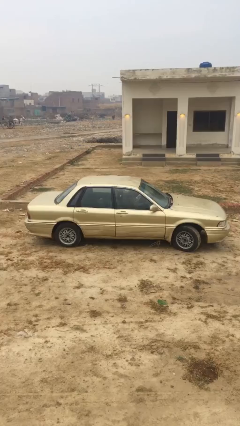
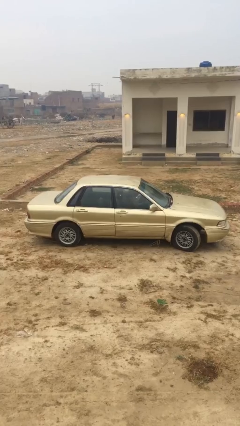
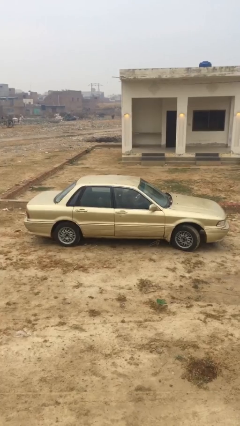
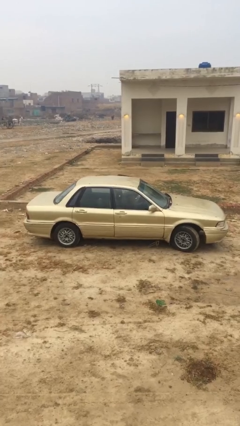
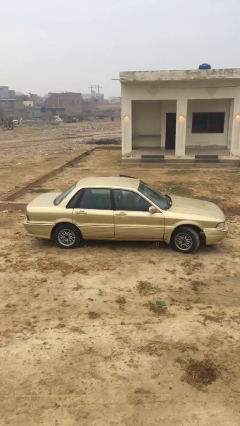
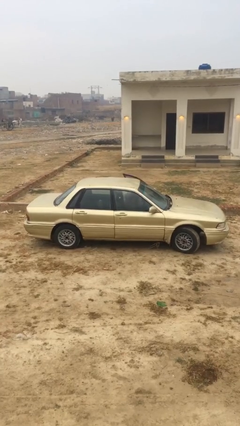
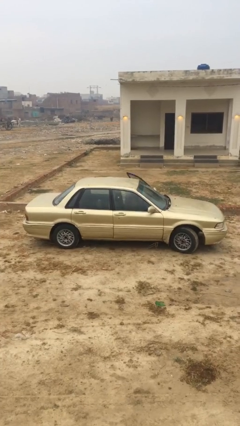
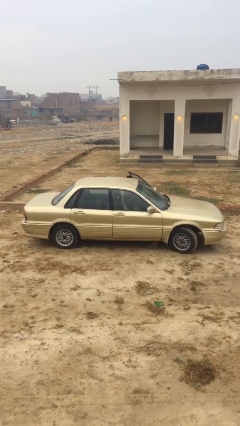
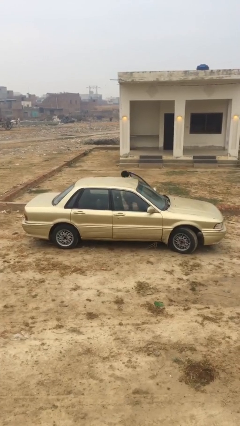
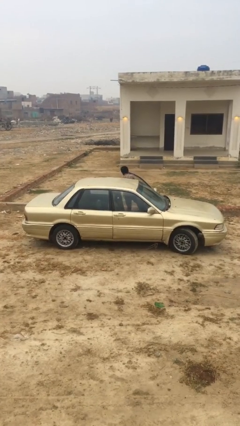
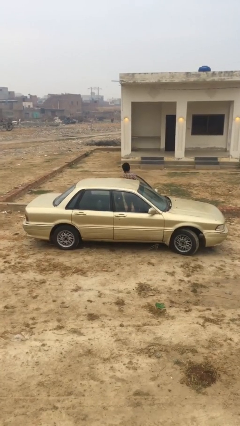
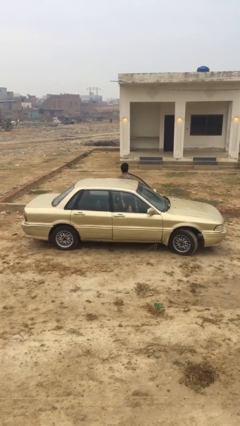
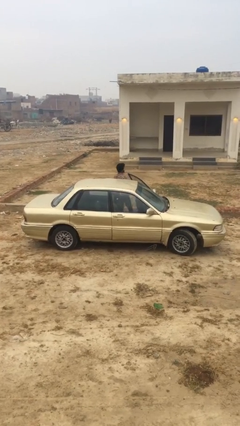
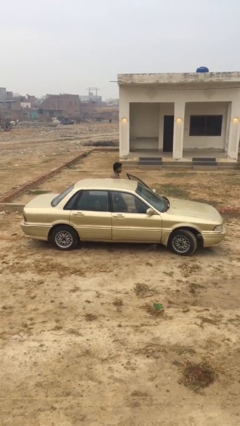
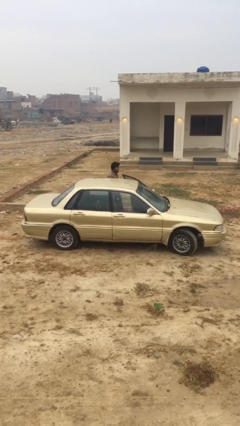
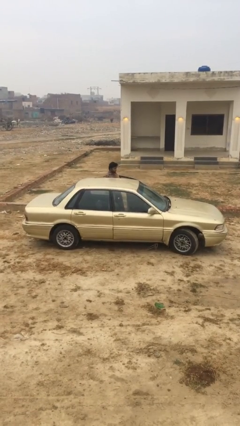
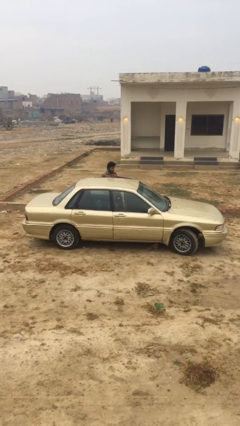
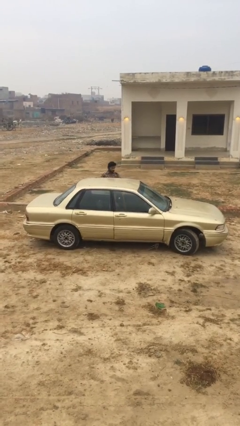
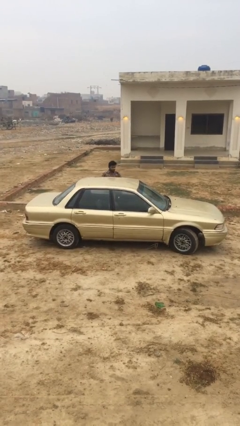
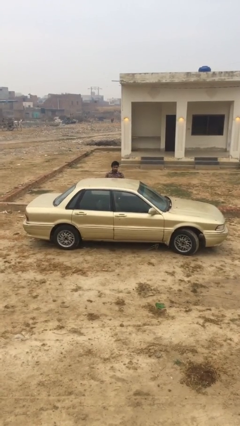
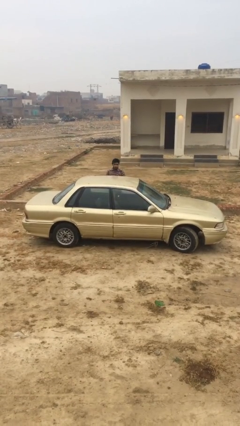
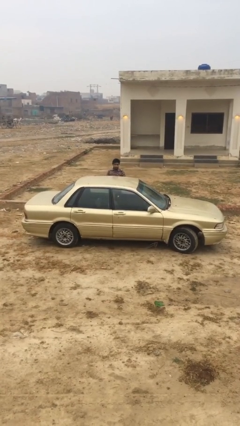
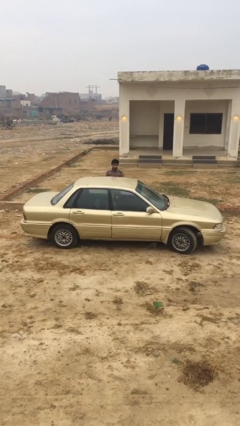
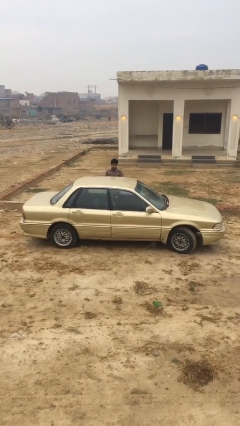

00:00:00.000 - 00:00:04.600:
car drops off person

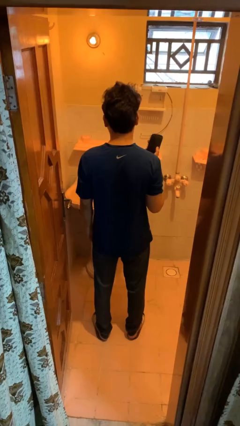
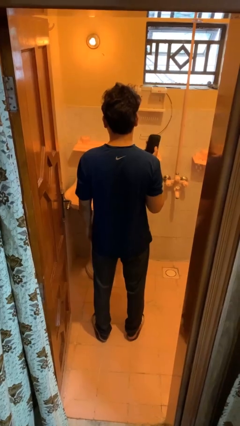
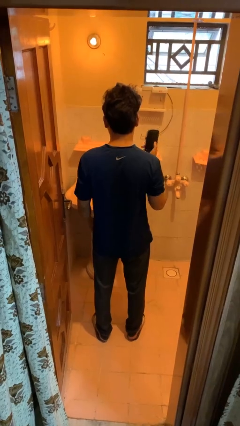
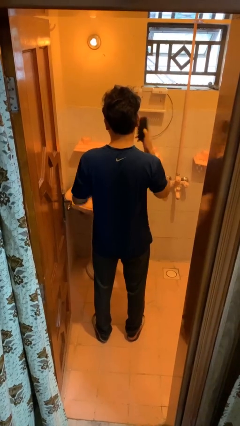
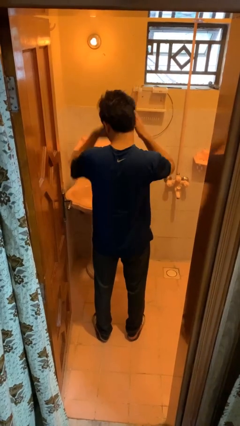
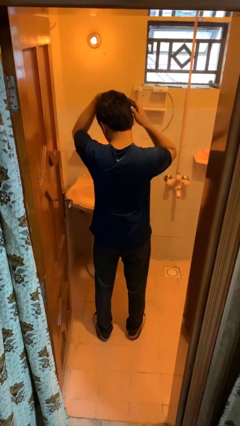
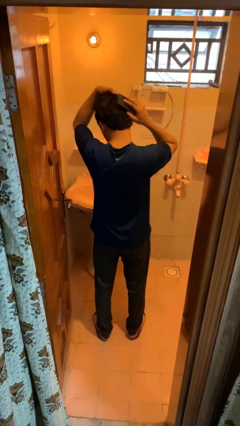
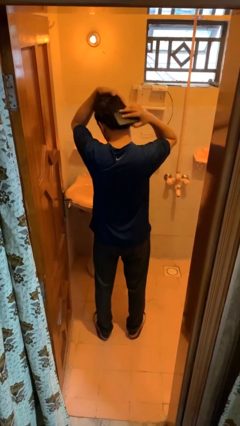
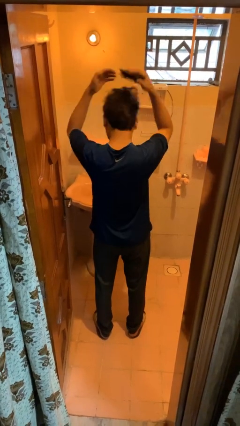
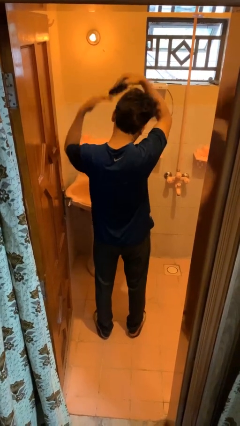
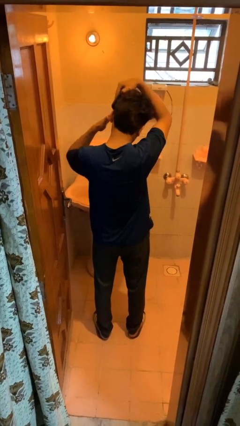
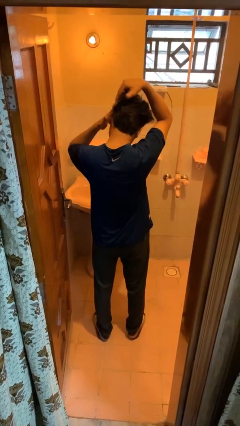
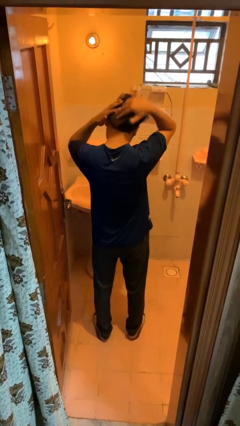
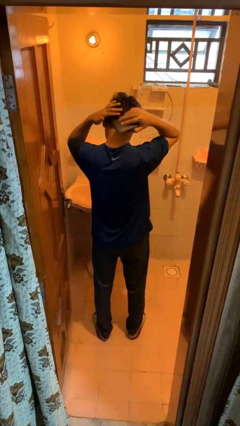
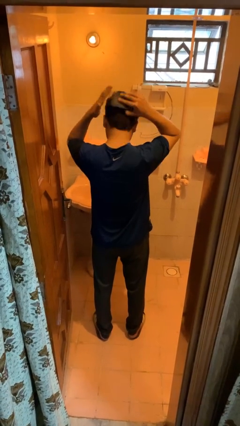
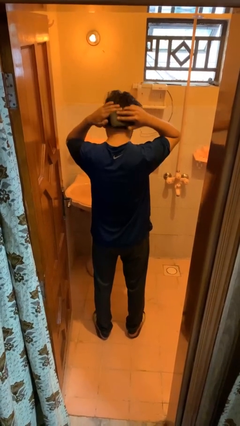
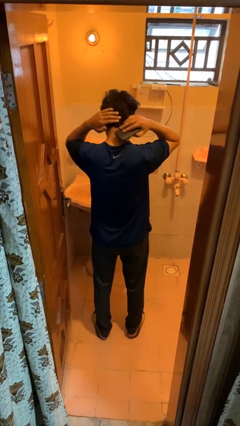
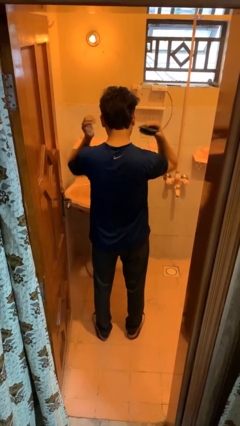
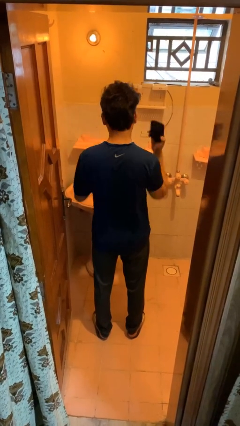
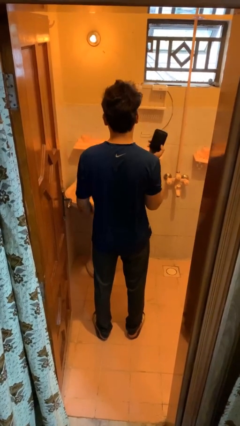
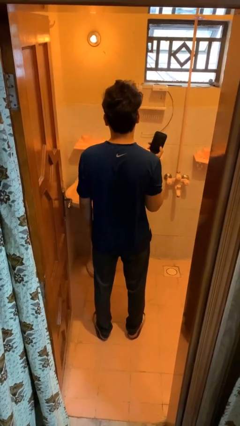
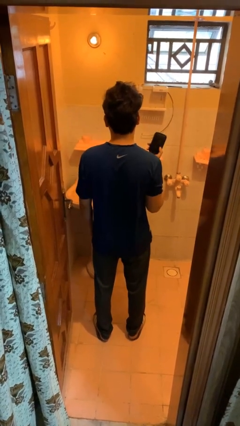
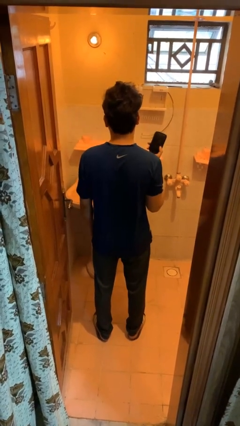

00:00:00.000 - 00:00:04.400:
person brushes hair

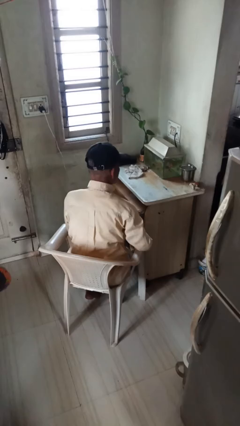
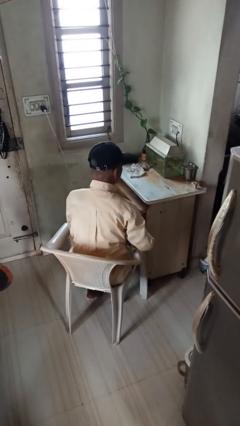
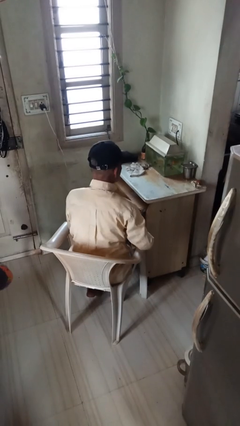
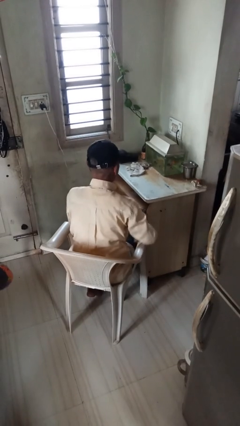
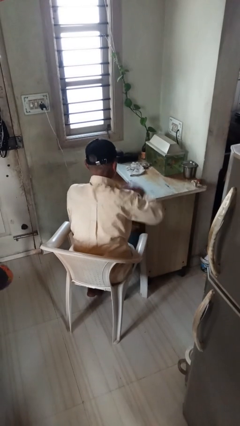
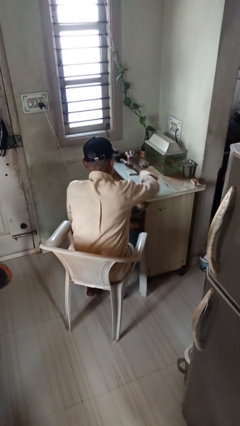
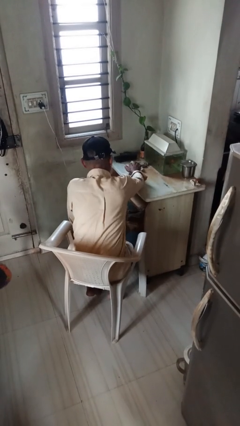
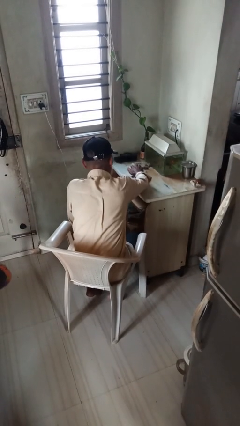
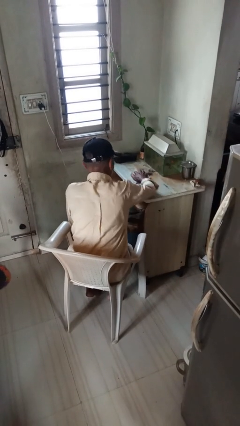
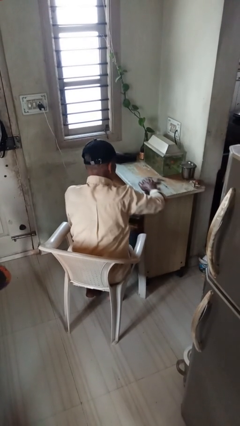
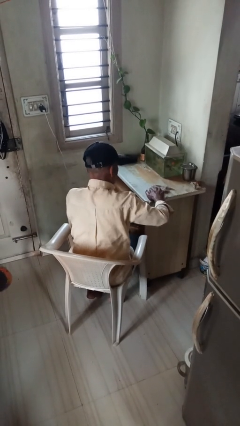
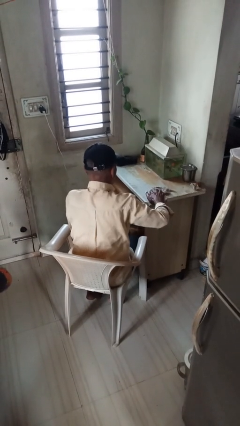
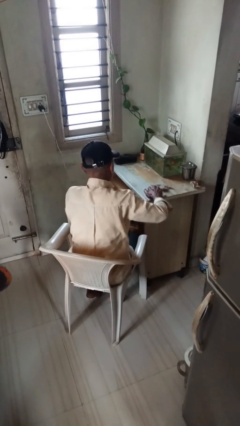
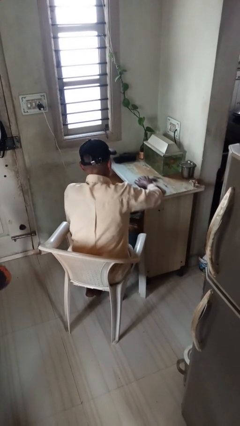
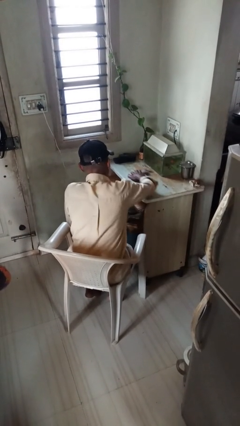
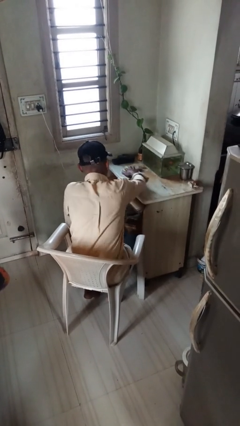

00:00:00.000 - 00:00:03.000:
person cleans table with rag

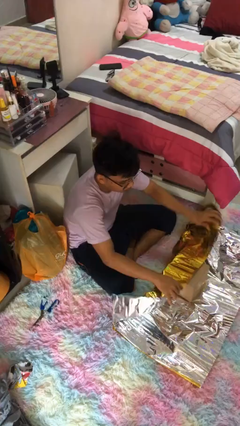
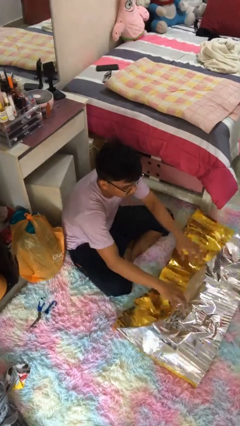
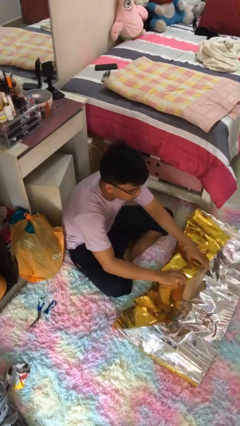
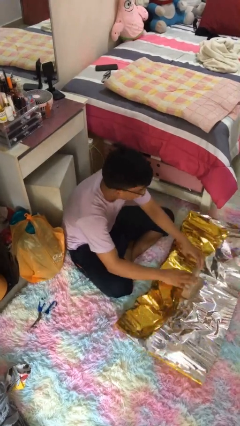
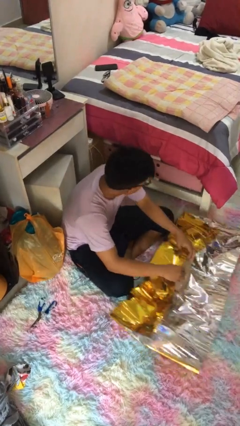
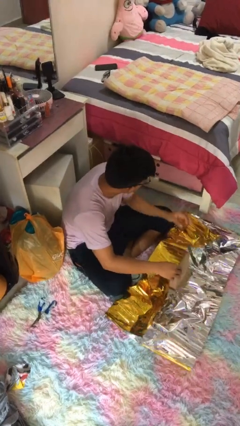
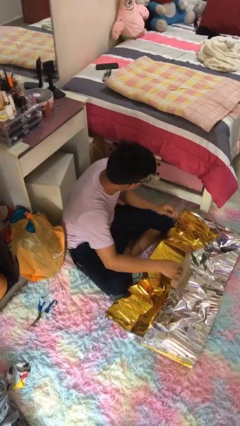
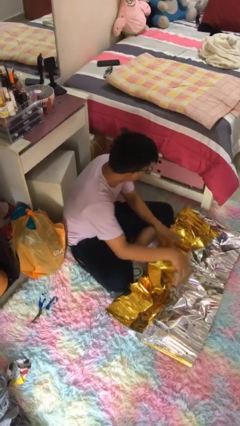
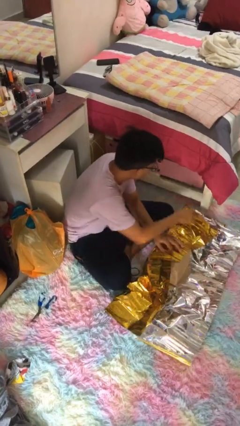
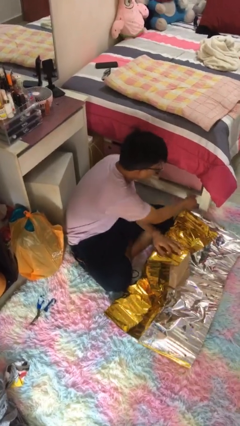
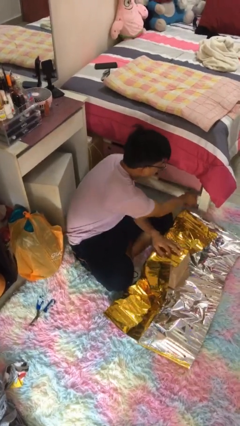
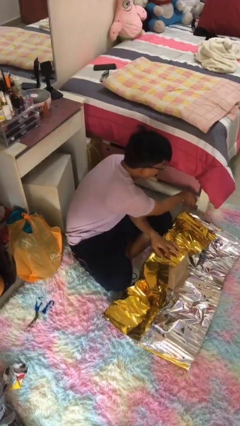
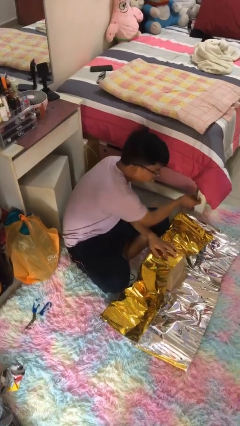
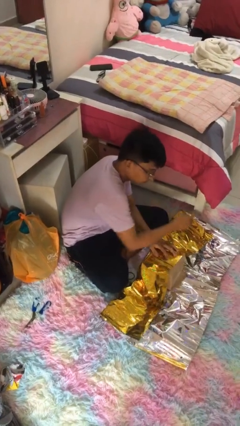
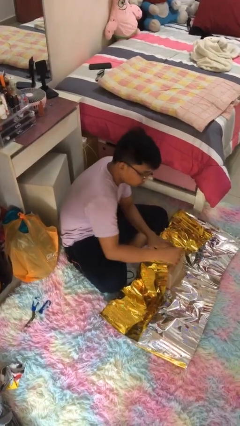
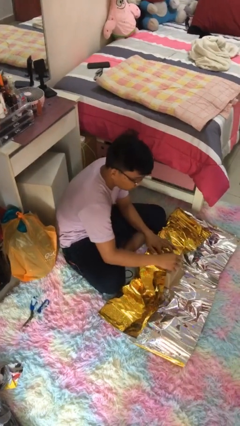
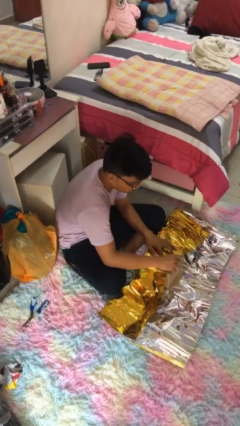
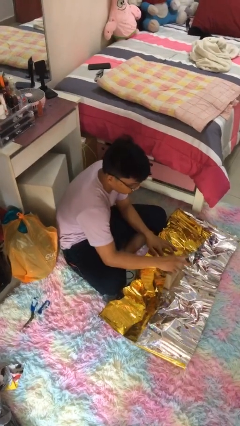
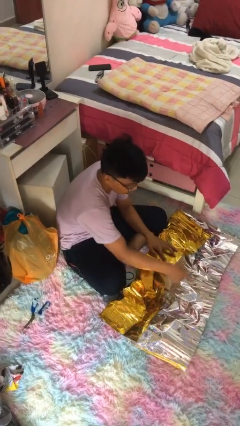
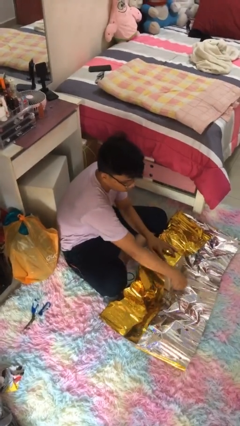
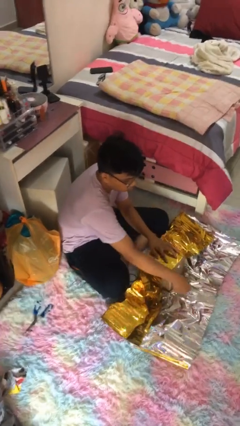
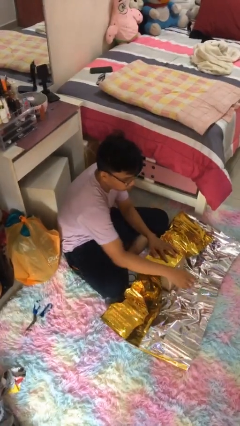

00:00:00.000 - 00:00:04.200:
person wraps box

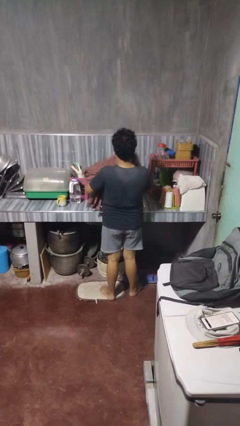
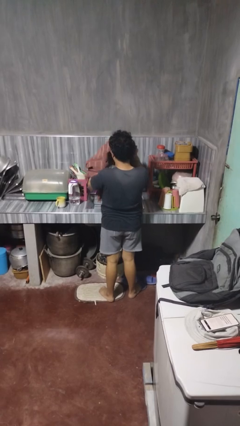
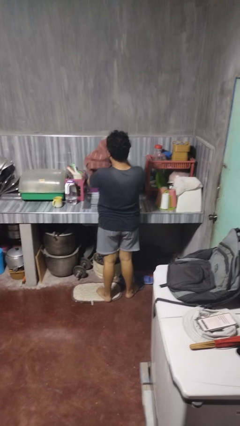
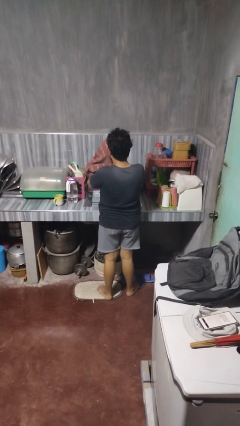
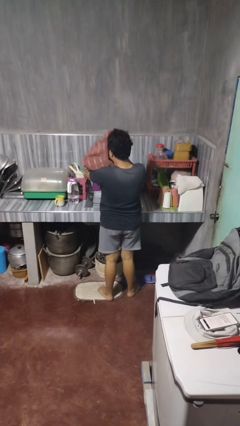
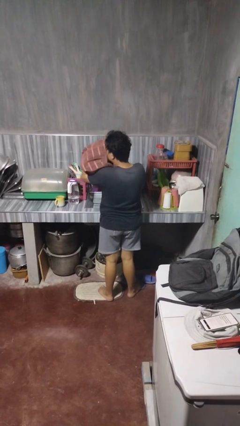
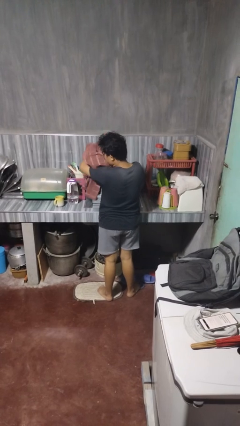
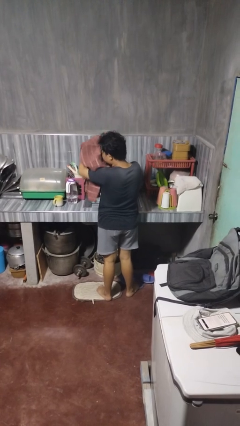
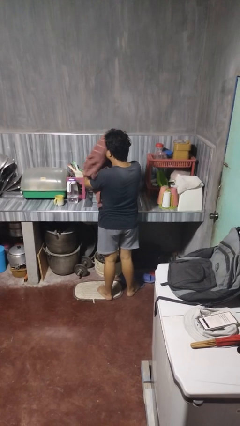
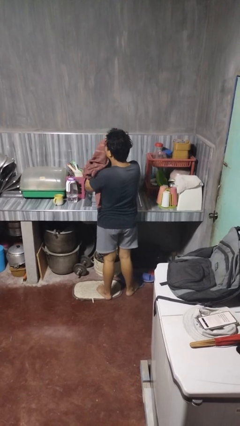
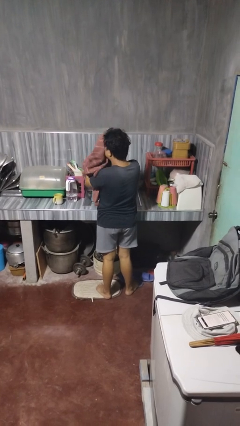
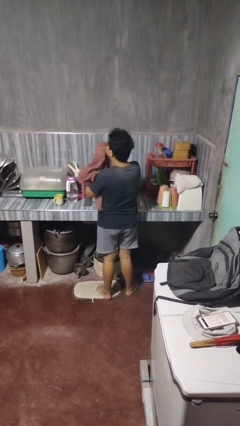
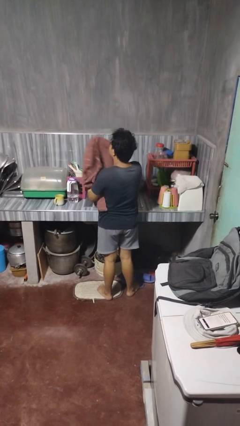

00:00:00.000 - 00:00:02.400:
person dries face with towel
